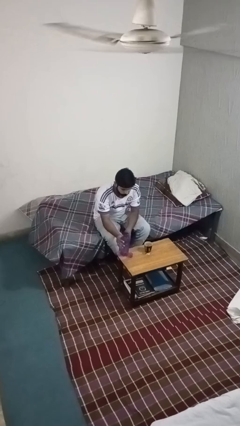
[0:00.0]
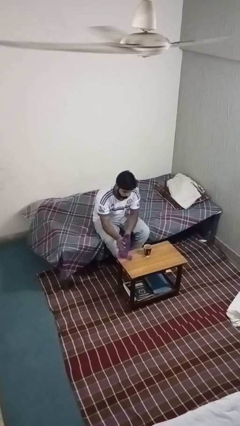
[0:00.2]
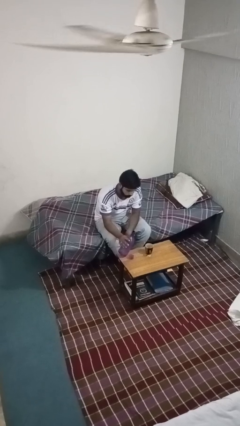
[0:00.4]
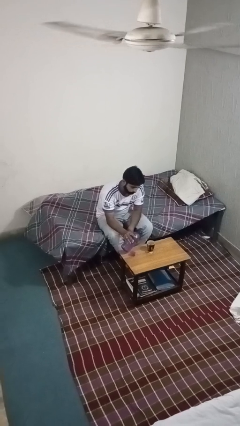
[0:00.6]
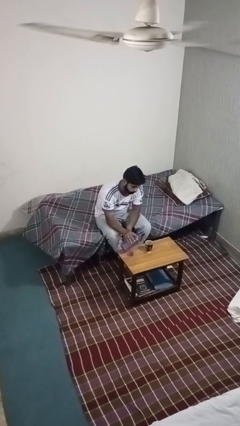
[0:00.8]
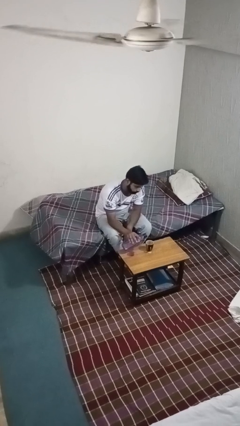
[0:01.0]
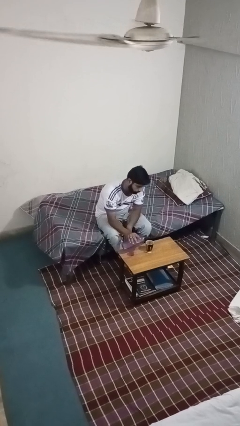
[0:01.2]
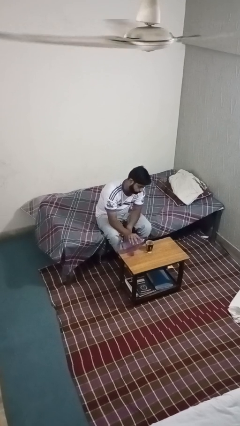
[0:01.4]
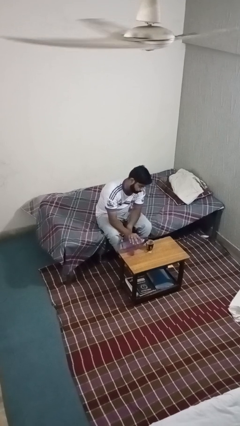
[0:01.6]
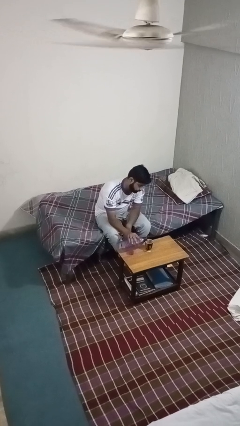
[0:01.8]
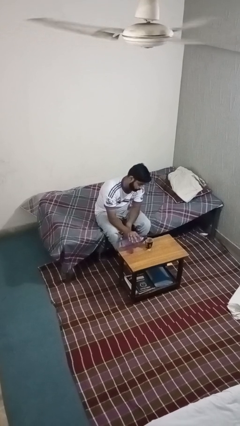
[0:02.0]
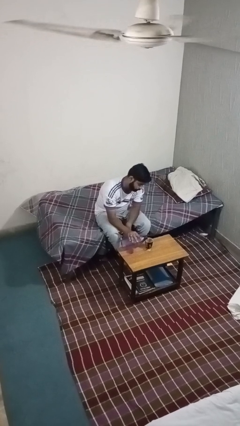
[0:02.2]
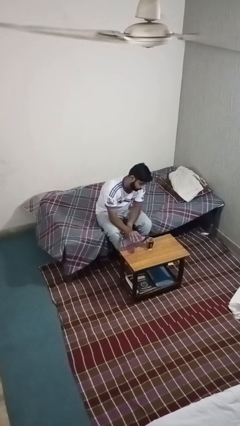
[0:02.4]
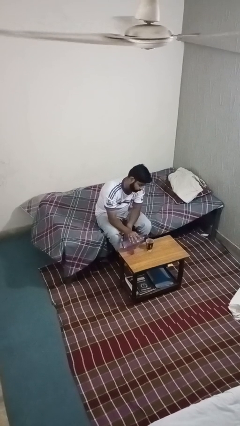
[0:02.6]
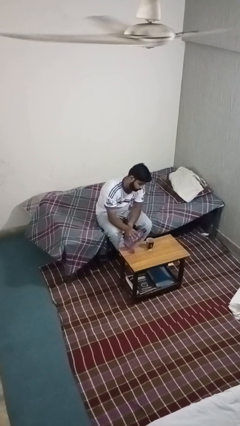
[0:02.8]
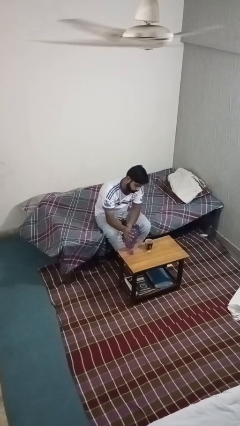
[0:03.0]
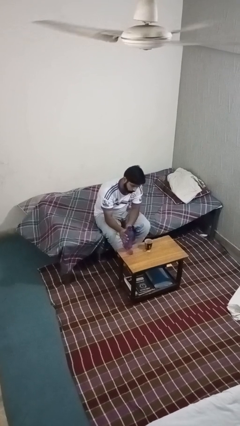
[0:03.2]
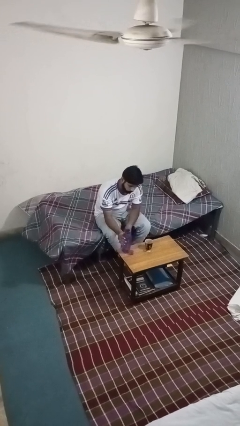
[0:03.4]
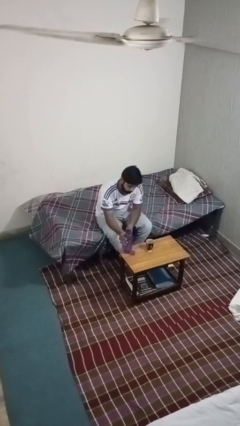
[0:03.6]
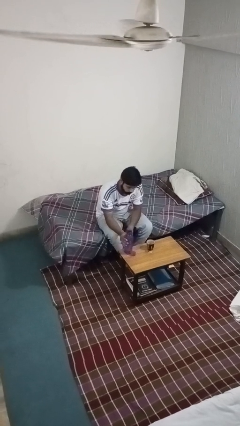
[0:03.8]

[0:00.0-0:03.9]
person pours liquid into cup

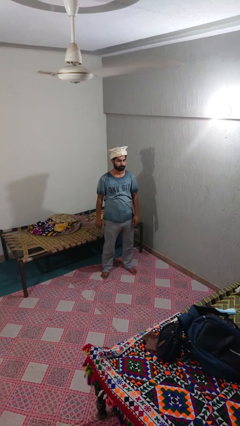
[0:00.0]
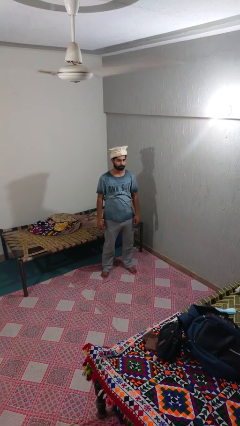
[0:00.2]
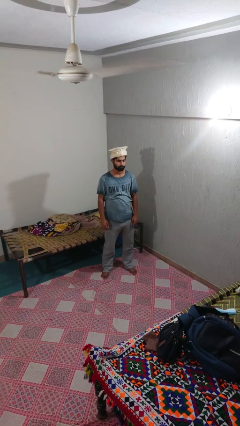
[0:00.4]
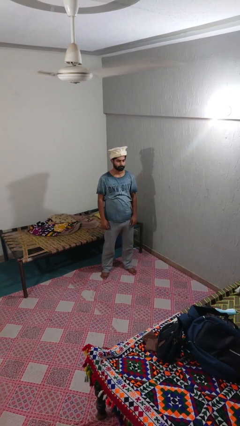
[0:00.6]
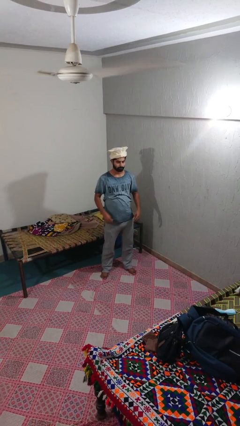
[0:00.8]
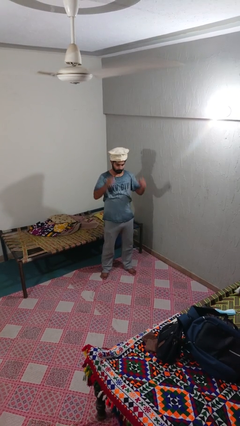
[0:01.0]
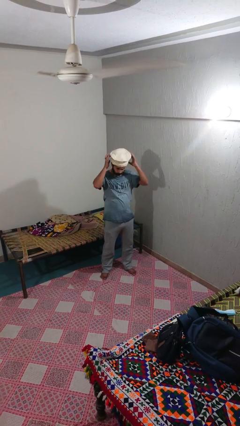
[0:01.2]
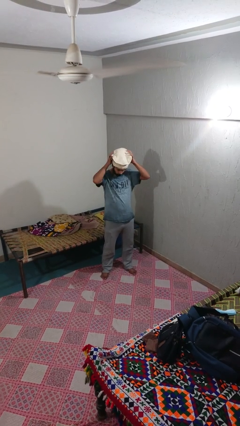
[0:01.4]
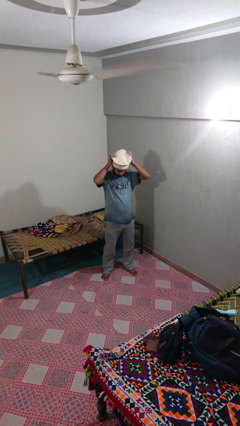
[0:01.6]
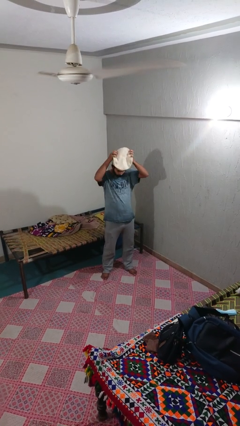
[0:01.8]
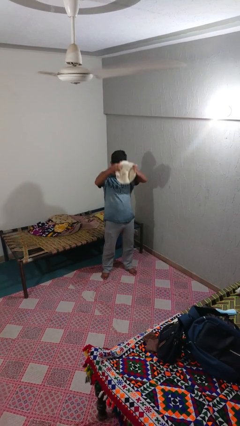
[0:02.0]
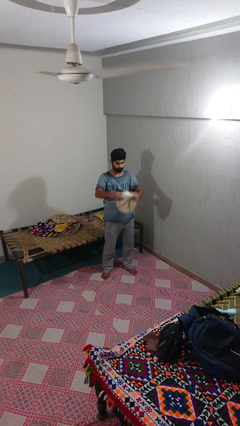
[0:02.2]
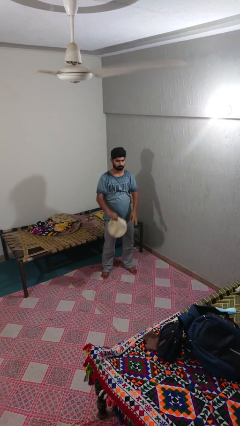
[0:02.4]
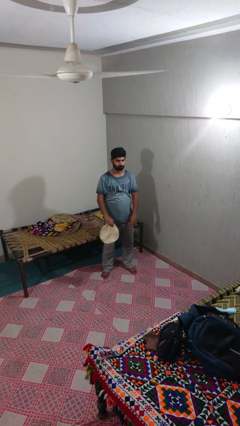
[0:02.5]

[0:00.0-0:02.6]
person takes off hat

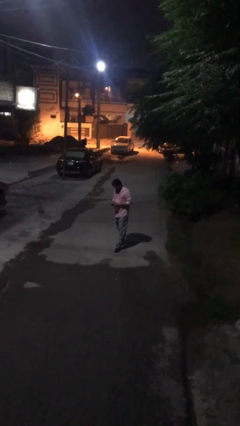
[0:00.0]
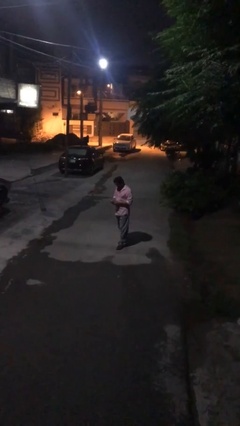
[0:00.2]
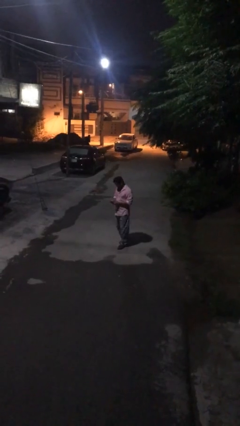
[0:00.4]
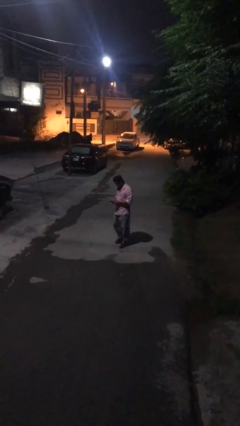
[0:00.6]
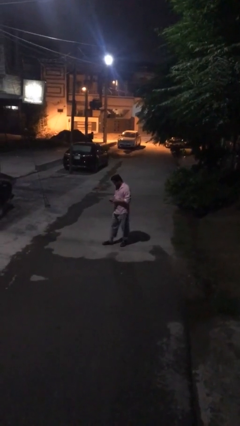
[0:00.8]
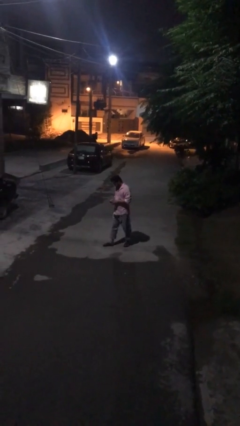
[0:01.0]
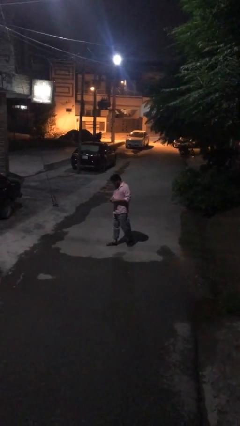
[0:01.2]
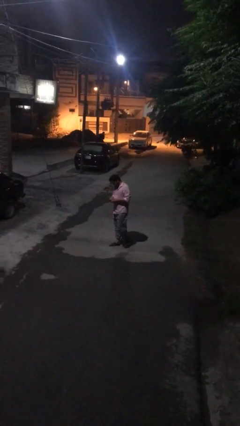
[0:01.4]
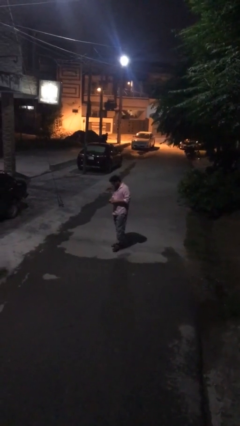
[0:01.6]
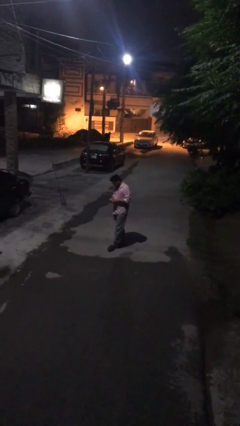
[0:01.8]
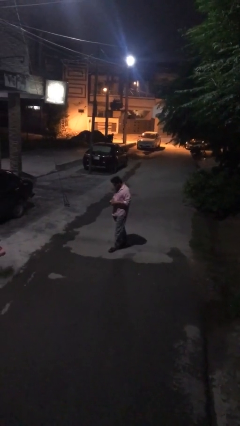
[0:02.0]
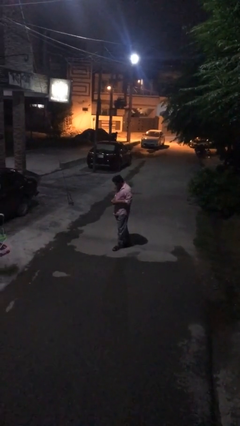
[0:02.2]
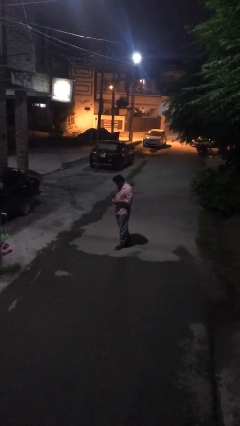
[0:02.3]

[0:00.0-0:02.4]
person texts on phone

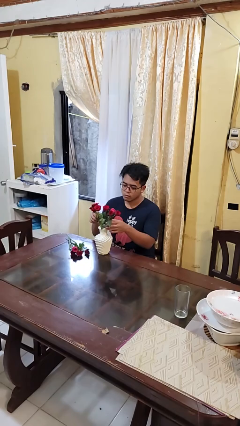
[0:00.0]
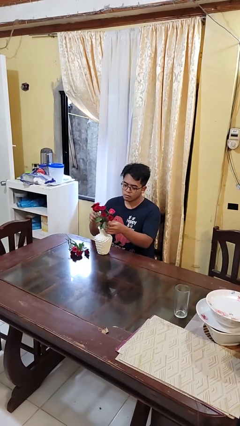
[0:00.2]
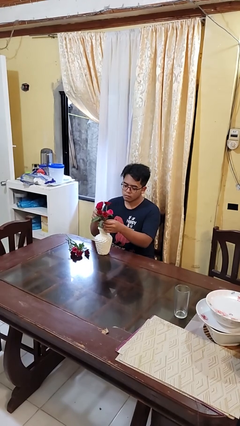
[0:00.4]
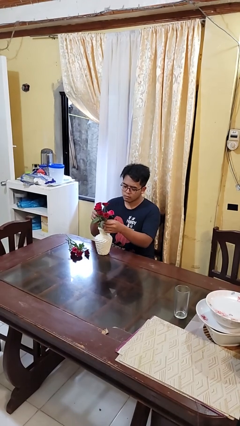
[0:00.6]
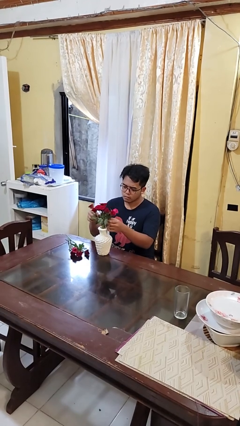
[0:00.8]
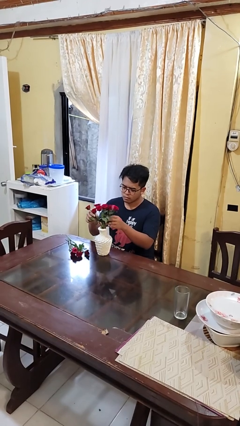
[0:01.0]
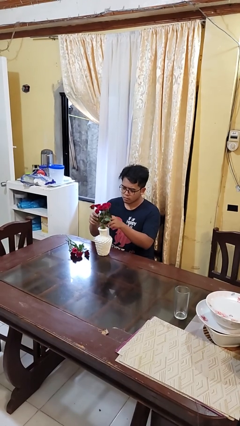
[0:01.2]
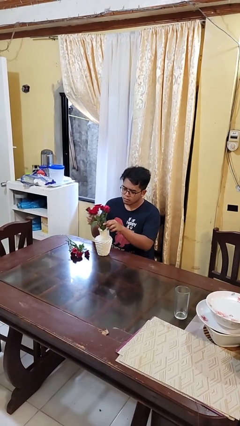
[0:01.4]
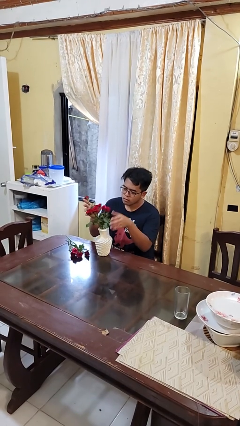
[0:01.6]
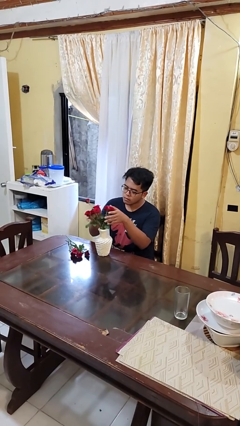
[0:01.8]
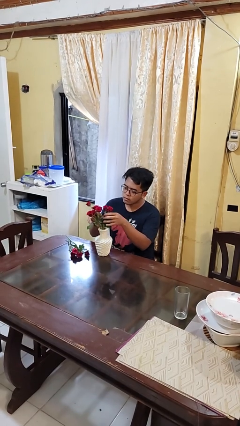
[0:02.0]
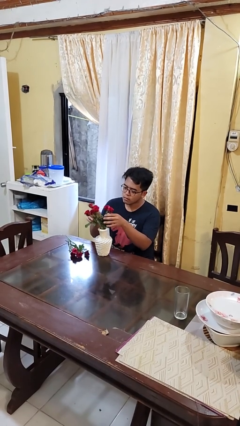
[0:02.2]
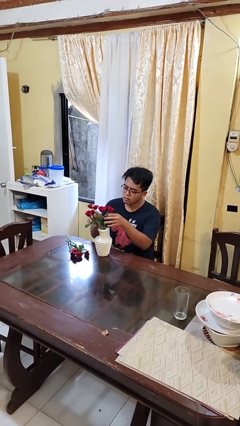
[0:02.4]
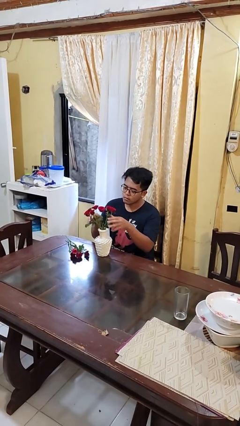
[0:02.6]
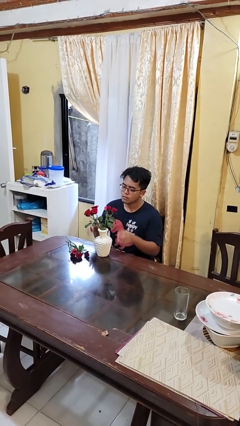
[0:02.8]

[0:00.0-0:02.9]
person arranges flowers in vase

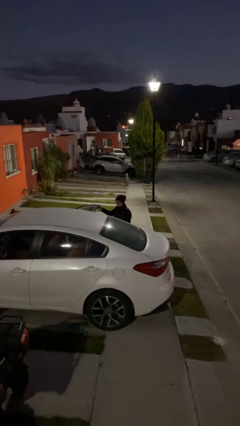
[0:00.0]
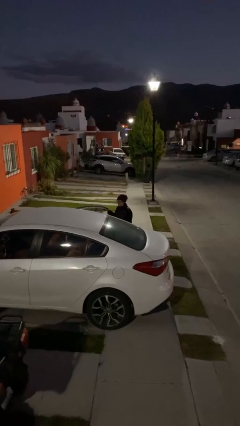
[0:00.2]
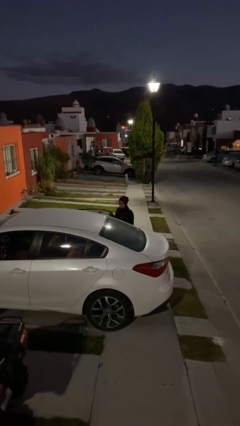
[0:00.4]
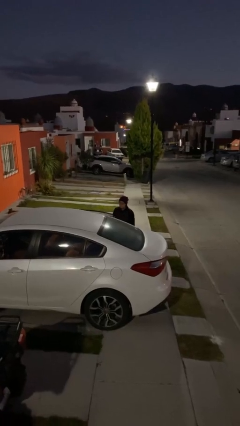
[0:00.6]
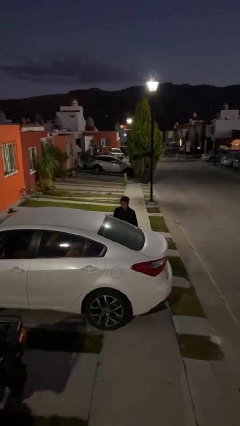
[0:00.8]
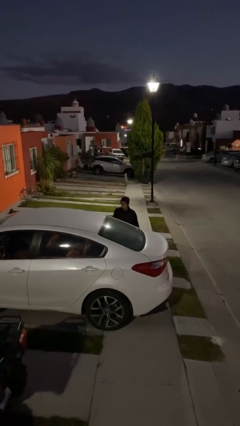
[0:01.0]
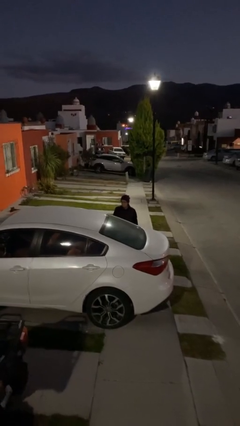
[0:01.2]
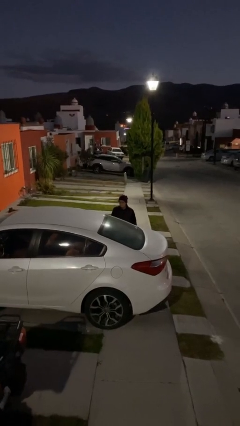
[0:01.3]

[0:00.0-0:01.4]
person closes car door

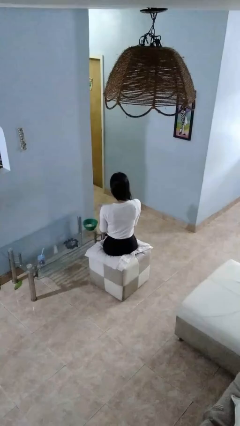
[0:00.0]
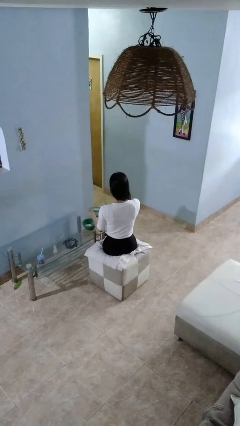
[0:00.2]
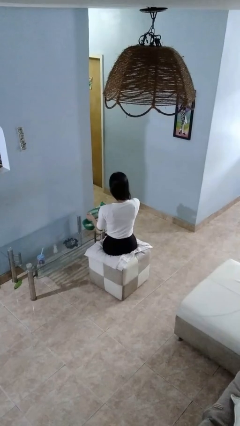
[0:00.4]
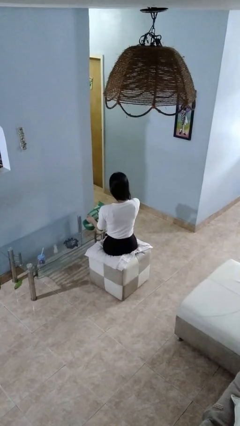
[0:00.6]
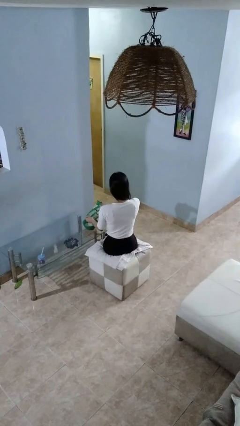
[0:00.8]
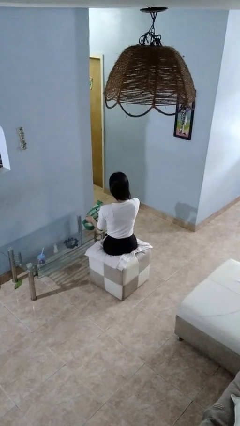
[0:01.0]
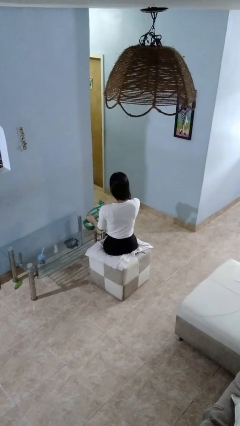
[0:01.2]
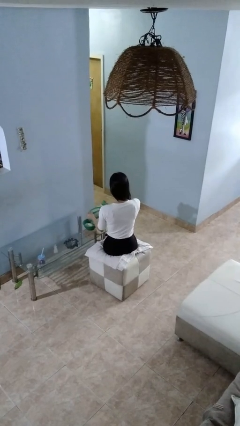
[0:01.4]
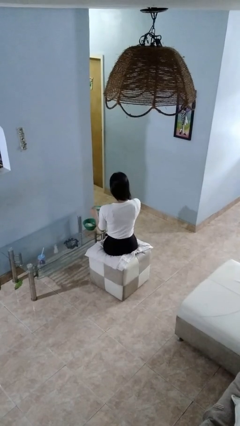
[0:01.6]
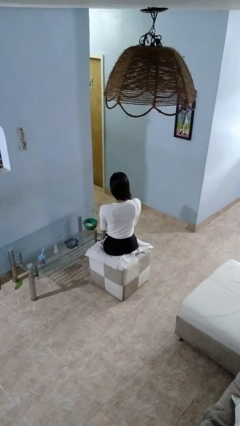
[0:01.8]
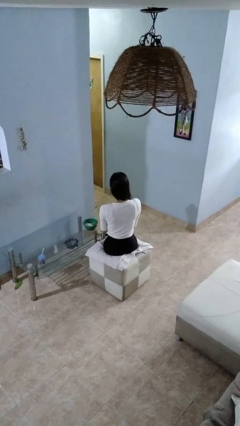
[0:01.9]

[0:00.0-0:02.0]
person pours into bowl

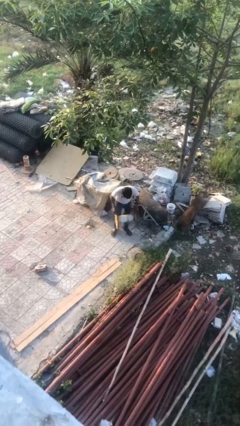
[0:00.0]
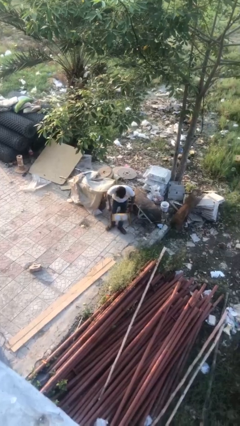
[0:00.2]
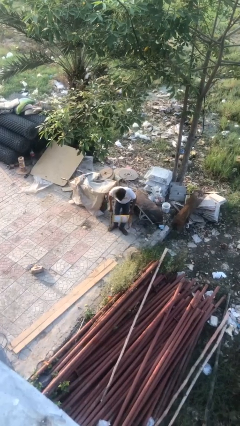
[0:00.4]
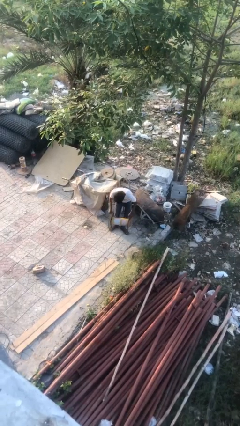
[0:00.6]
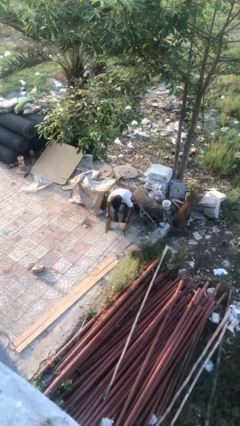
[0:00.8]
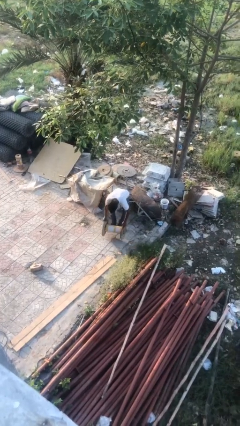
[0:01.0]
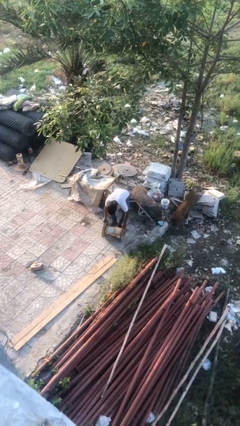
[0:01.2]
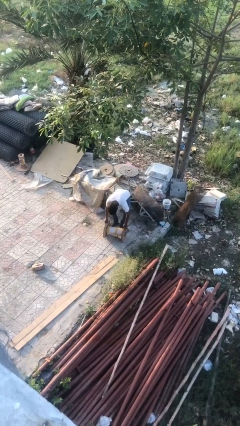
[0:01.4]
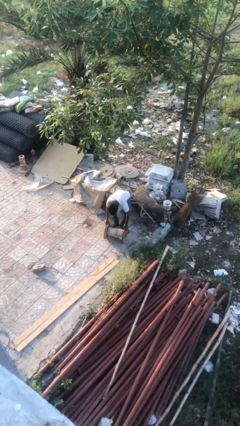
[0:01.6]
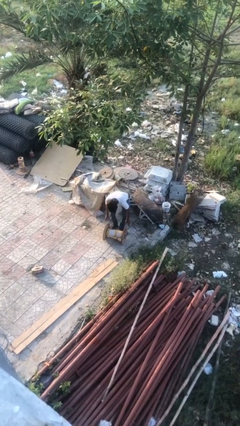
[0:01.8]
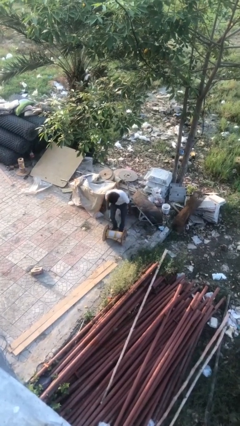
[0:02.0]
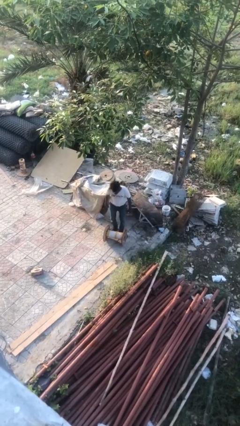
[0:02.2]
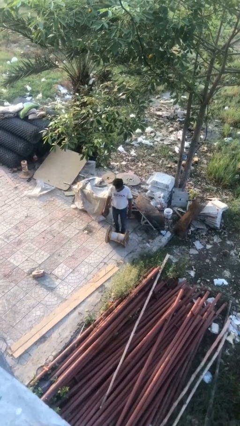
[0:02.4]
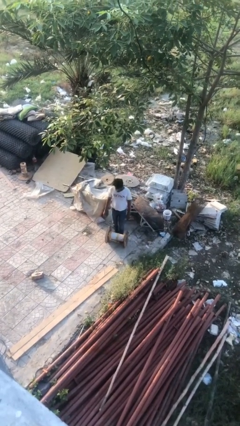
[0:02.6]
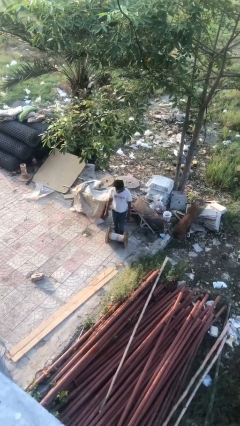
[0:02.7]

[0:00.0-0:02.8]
person puts down object on floor
